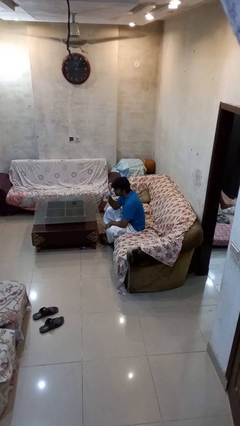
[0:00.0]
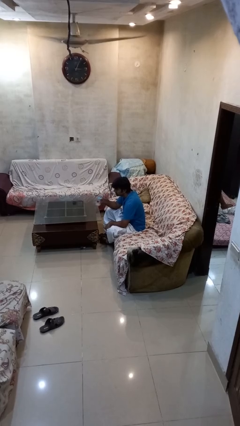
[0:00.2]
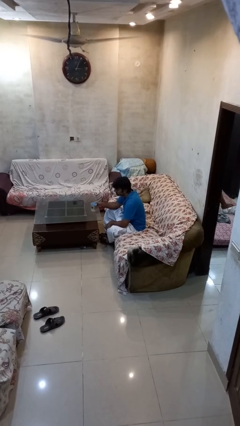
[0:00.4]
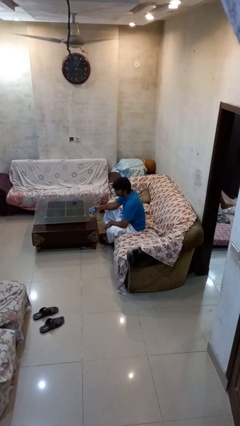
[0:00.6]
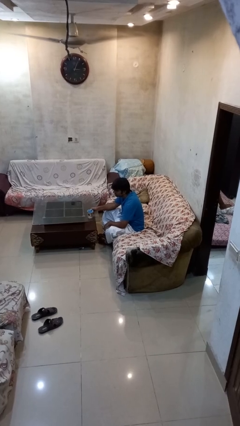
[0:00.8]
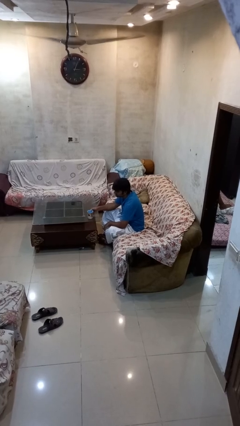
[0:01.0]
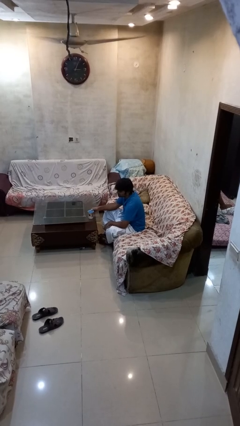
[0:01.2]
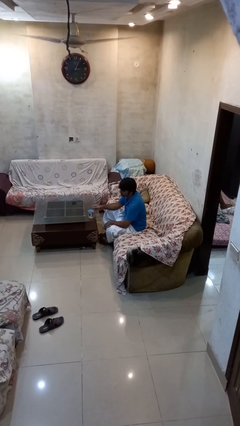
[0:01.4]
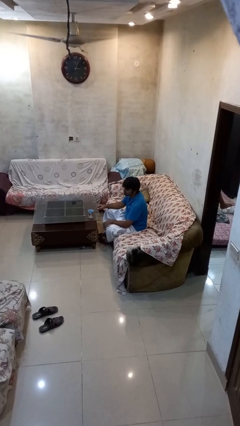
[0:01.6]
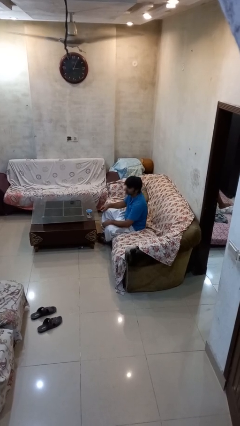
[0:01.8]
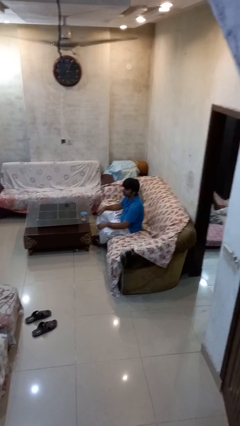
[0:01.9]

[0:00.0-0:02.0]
person puts down object on table

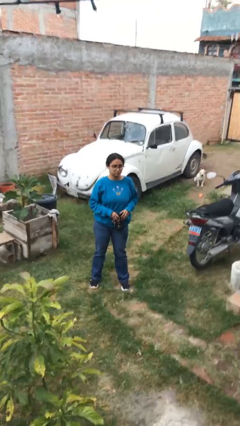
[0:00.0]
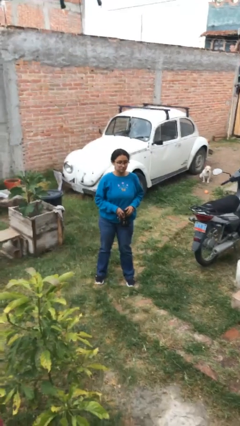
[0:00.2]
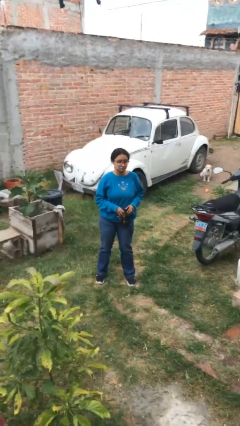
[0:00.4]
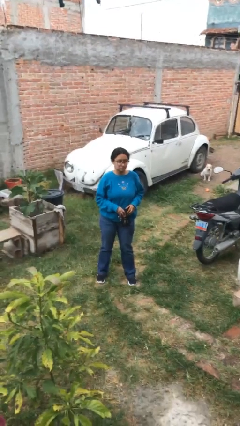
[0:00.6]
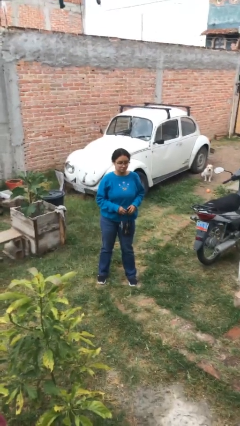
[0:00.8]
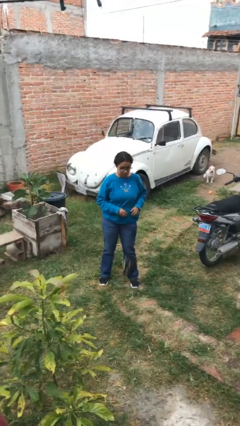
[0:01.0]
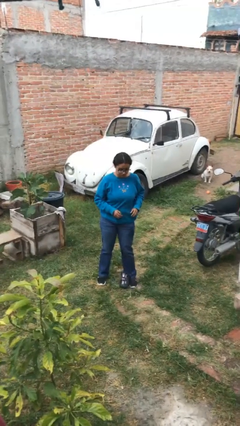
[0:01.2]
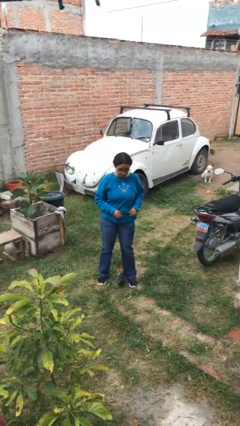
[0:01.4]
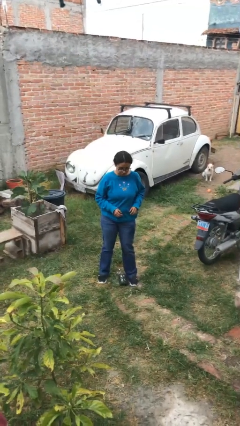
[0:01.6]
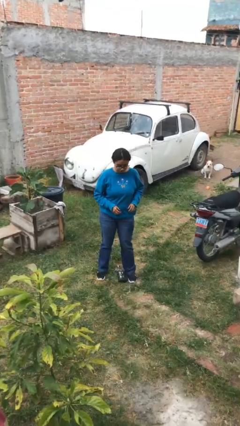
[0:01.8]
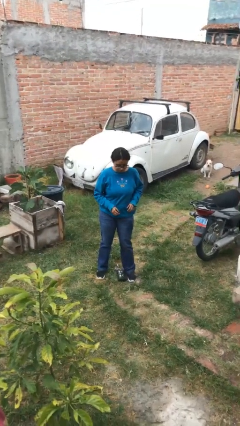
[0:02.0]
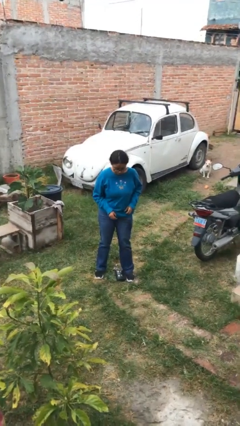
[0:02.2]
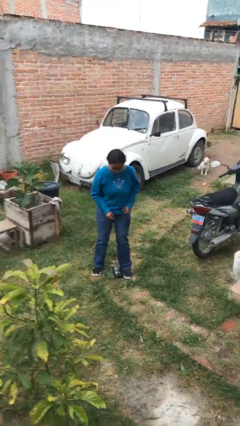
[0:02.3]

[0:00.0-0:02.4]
person drops object

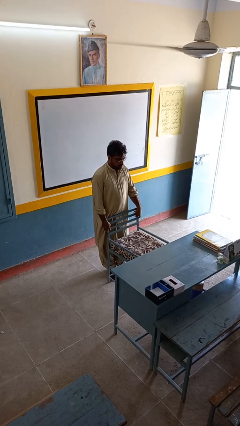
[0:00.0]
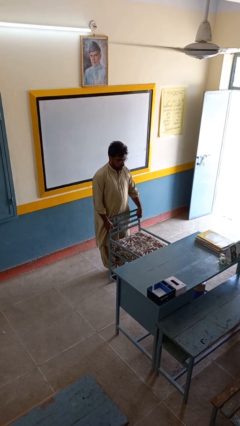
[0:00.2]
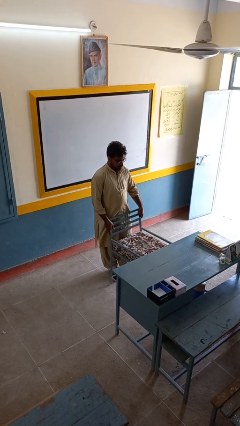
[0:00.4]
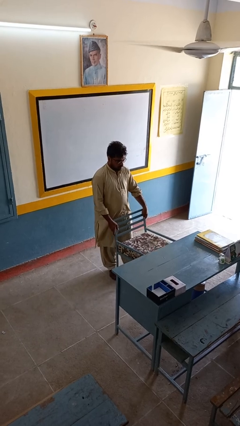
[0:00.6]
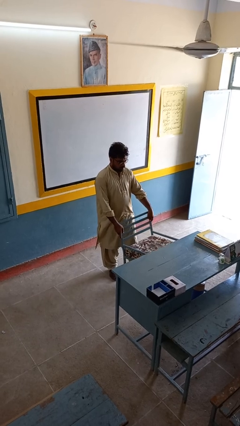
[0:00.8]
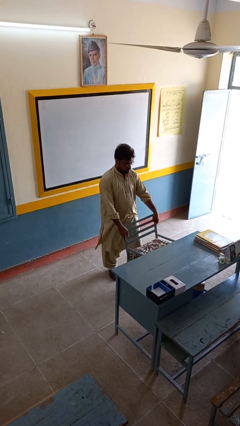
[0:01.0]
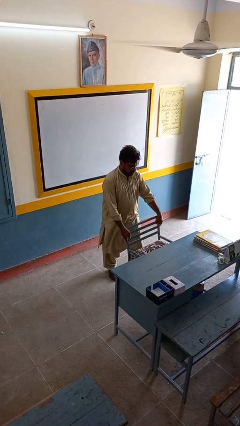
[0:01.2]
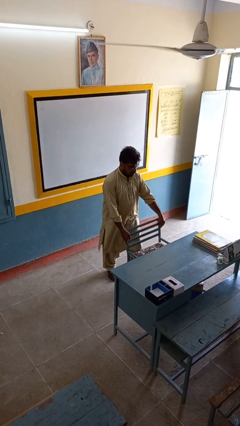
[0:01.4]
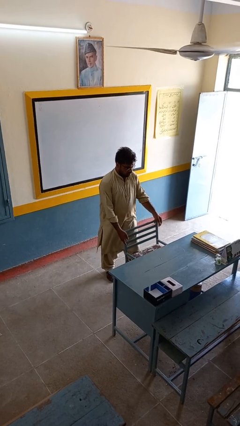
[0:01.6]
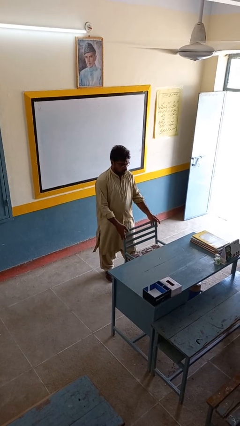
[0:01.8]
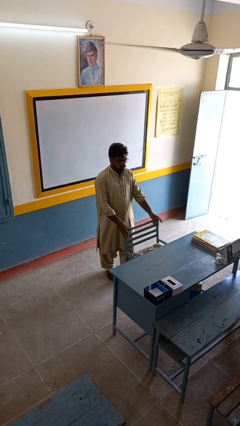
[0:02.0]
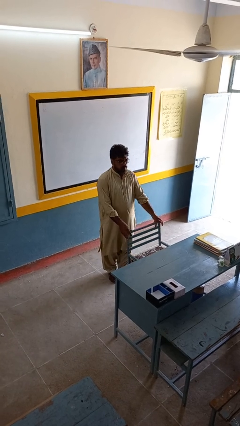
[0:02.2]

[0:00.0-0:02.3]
person pushes in chair

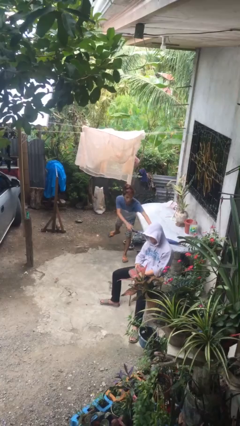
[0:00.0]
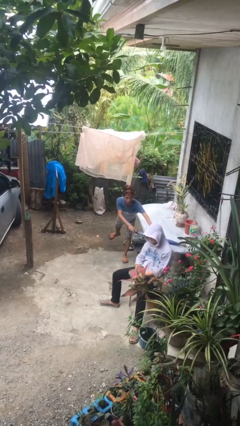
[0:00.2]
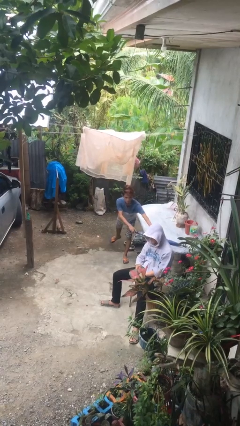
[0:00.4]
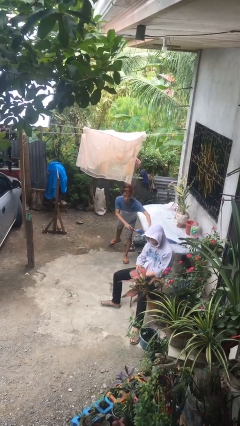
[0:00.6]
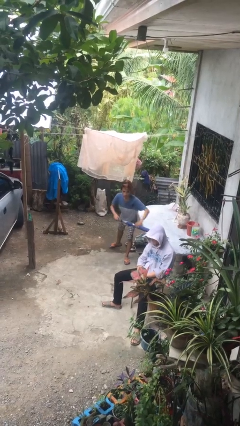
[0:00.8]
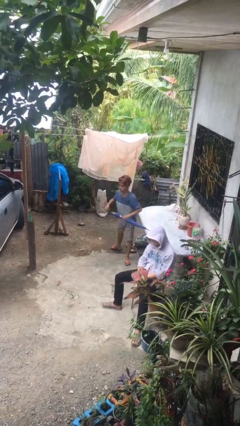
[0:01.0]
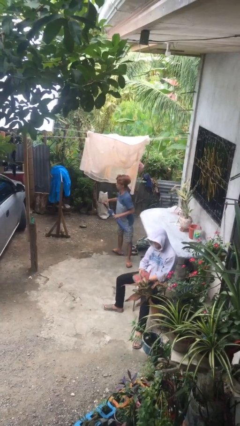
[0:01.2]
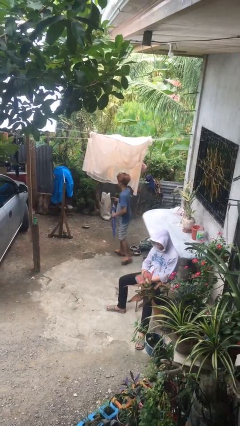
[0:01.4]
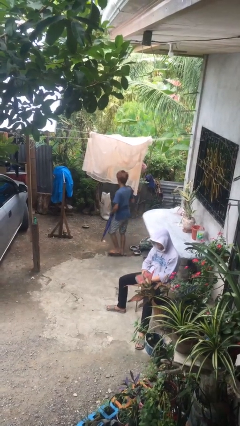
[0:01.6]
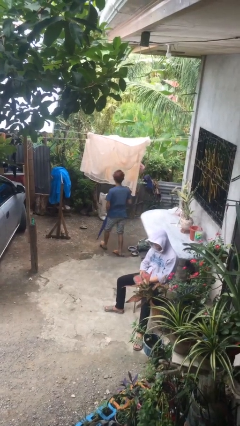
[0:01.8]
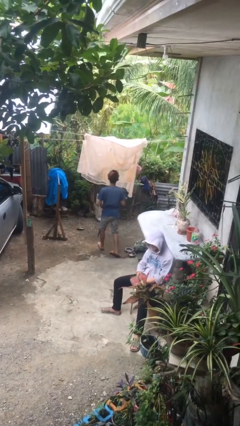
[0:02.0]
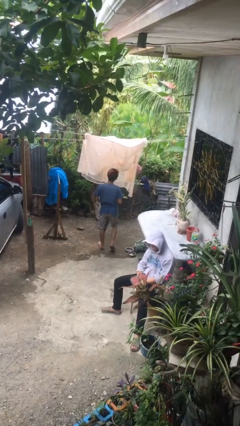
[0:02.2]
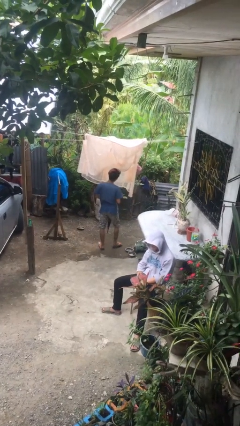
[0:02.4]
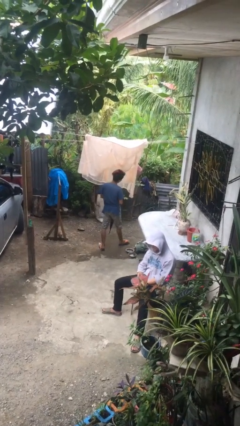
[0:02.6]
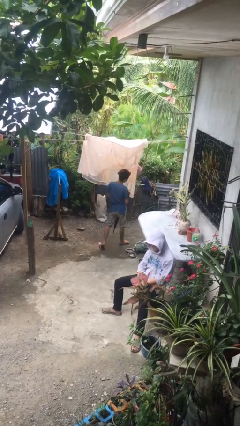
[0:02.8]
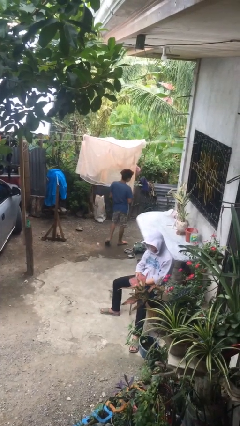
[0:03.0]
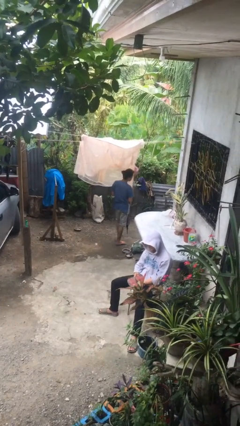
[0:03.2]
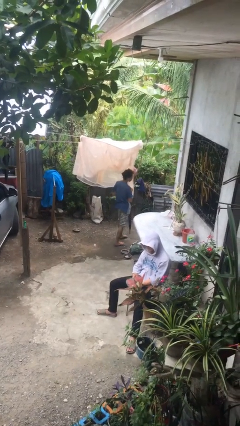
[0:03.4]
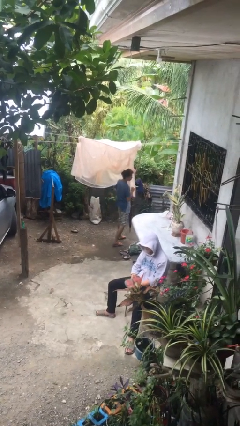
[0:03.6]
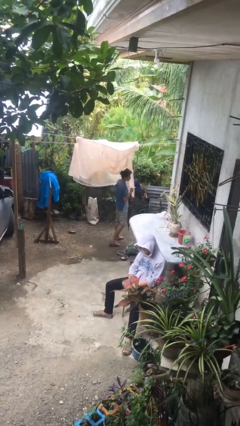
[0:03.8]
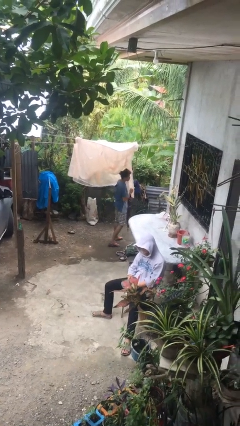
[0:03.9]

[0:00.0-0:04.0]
person steals object from person

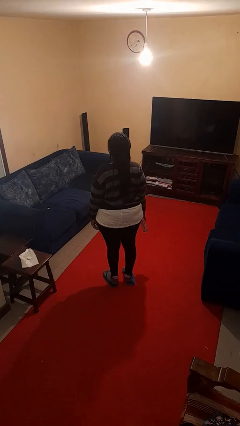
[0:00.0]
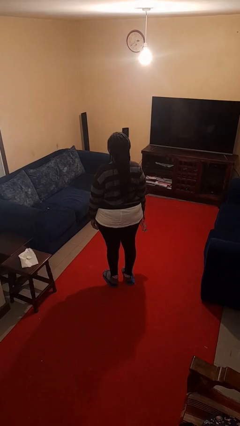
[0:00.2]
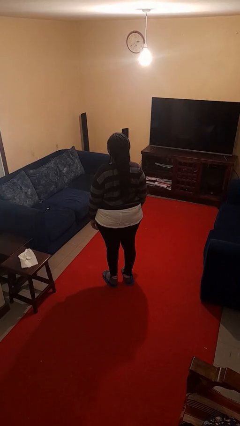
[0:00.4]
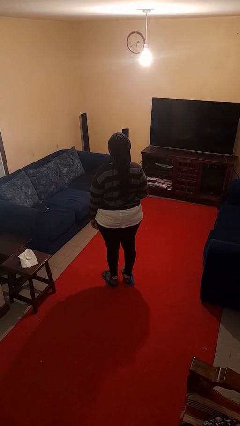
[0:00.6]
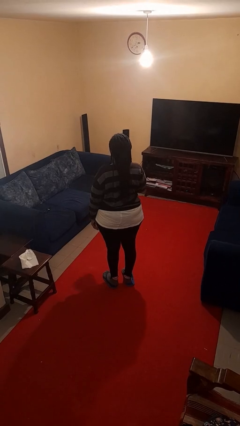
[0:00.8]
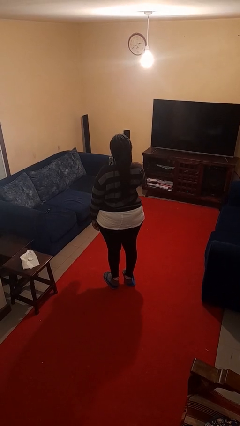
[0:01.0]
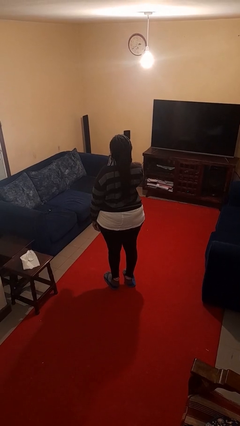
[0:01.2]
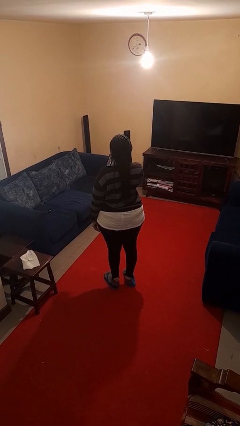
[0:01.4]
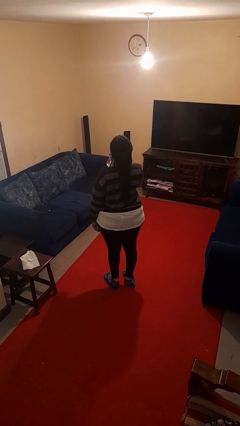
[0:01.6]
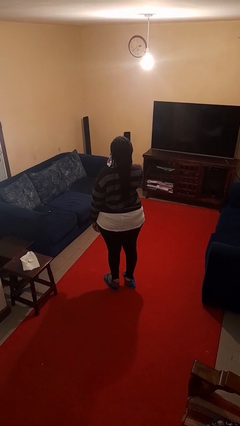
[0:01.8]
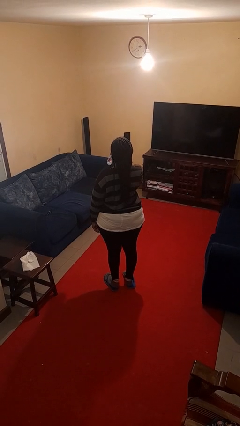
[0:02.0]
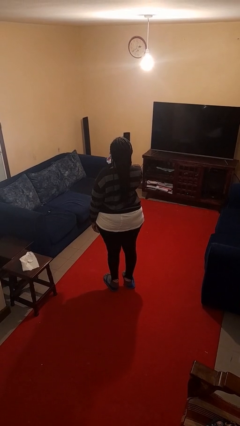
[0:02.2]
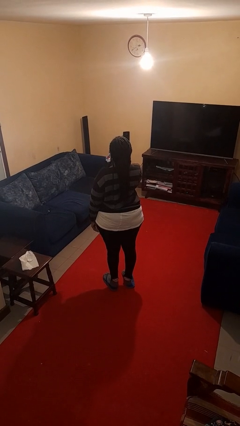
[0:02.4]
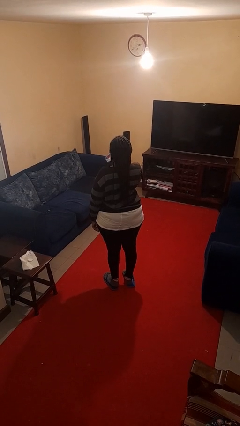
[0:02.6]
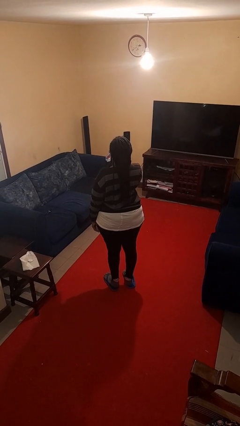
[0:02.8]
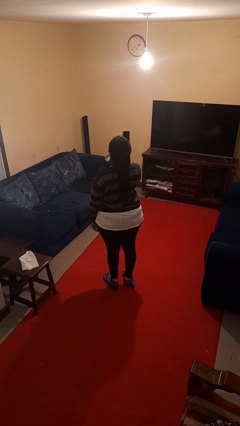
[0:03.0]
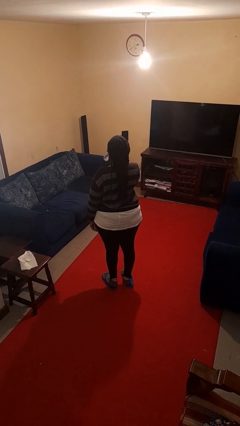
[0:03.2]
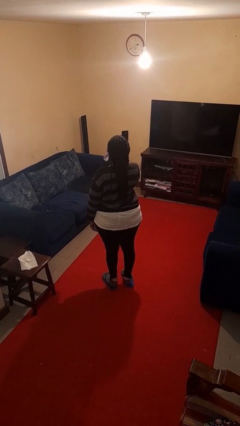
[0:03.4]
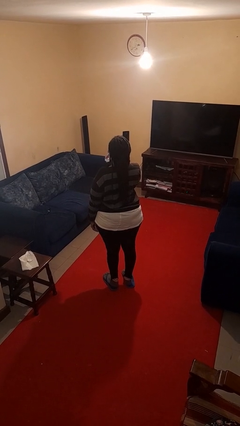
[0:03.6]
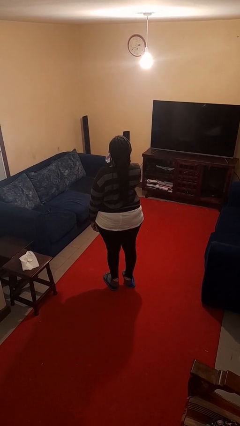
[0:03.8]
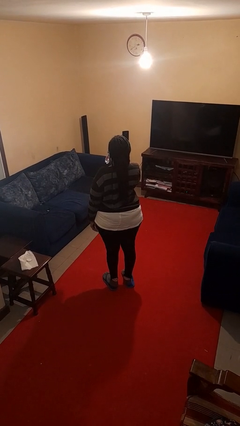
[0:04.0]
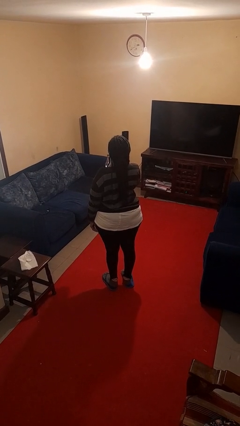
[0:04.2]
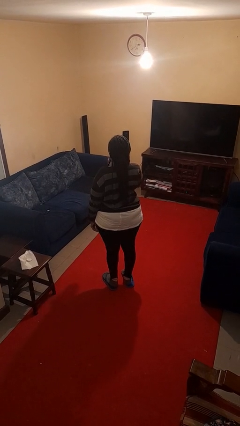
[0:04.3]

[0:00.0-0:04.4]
person drinks from bottle

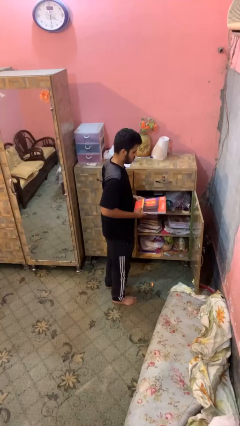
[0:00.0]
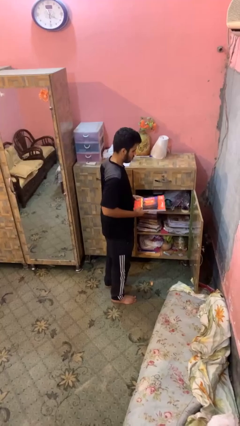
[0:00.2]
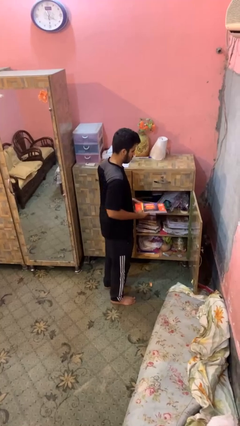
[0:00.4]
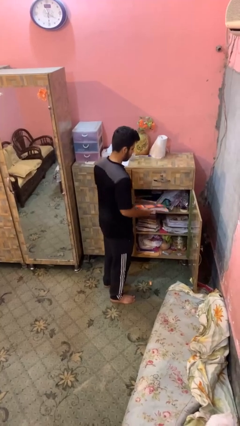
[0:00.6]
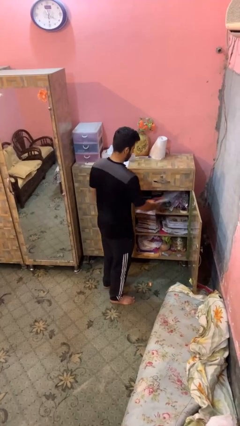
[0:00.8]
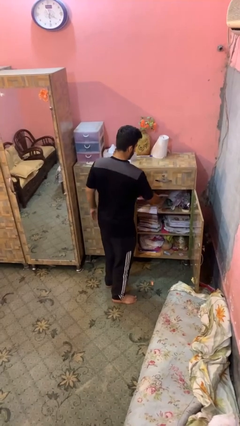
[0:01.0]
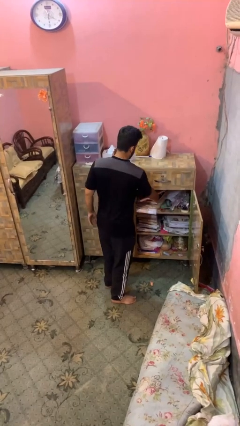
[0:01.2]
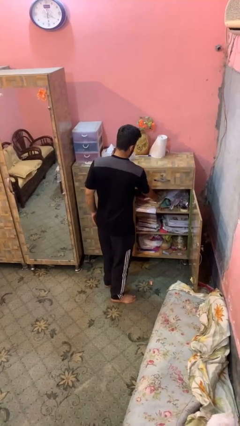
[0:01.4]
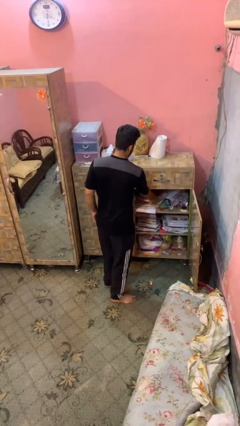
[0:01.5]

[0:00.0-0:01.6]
person puts down object into cabinet

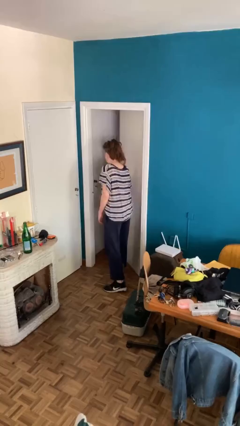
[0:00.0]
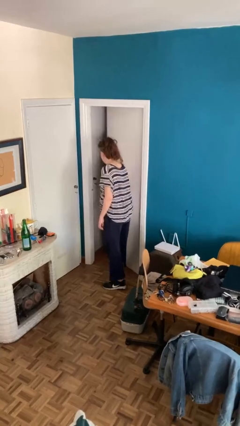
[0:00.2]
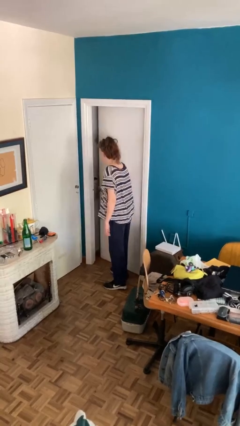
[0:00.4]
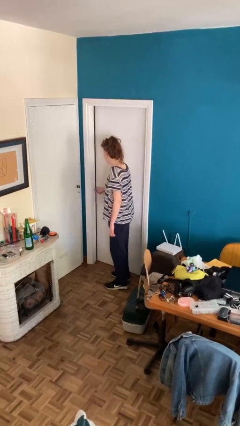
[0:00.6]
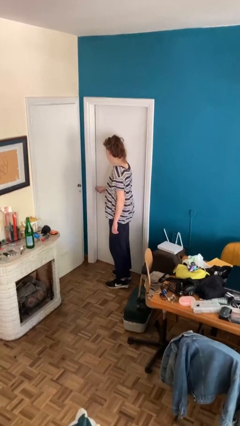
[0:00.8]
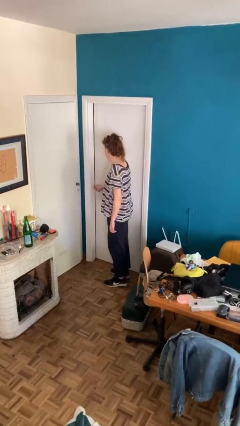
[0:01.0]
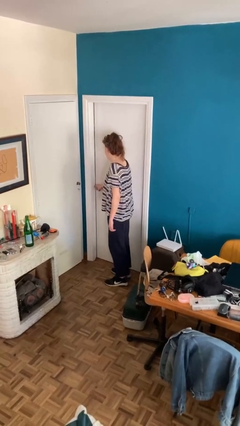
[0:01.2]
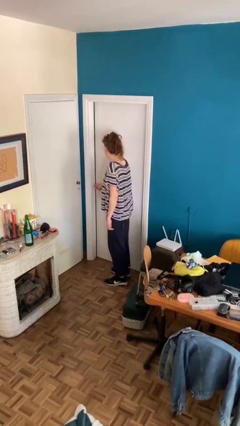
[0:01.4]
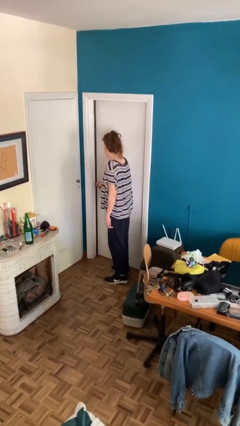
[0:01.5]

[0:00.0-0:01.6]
person closes facility door
